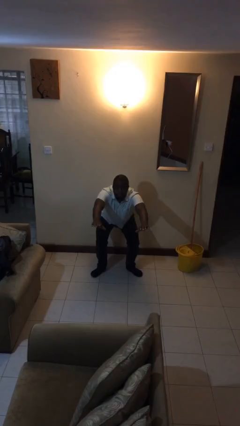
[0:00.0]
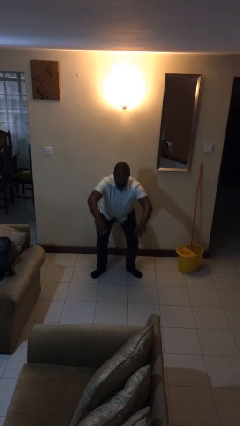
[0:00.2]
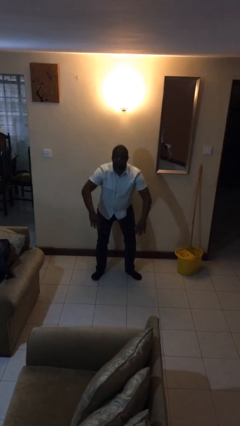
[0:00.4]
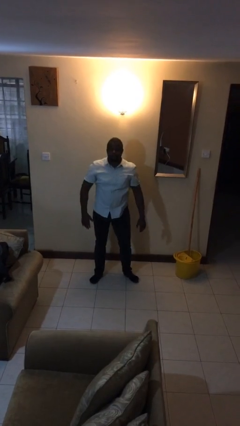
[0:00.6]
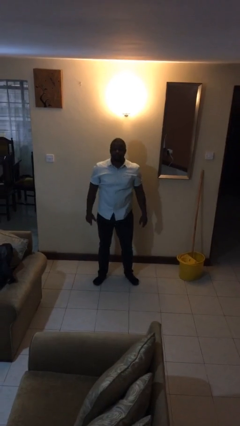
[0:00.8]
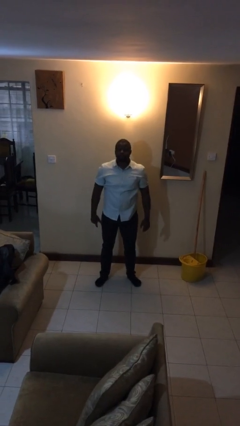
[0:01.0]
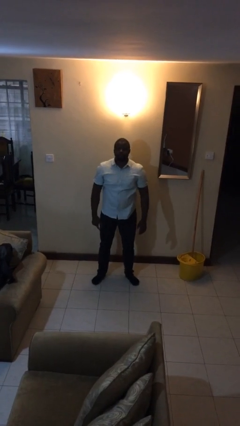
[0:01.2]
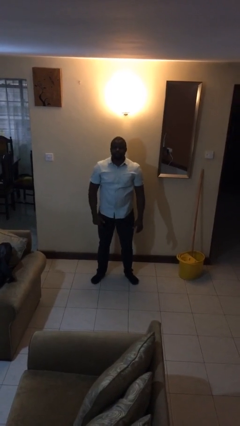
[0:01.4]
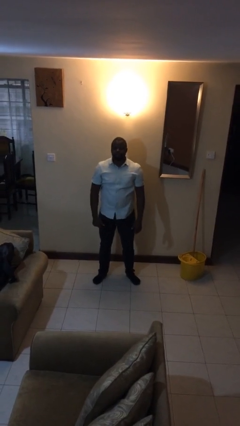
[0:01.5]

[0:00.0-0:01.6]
person stands up

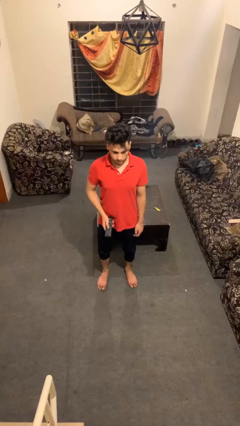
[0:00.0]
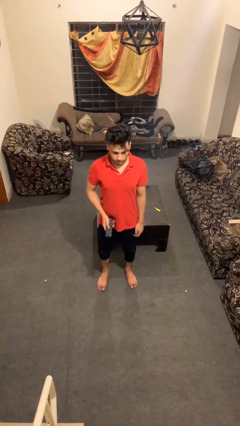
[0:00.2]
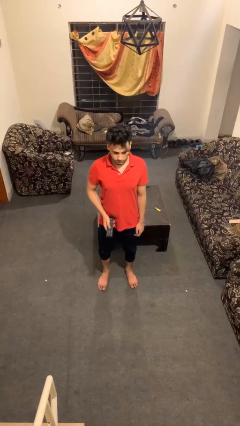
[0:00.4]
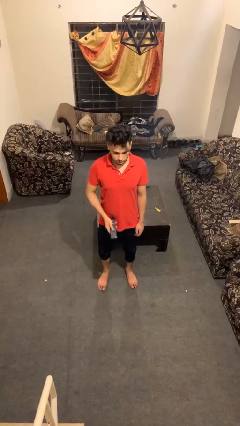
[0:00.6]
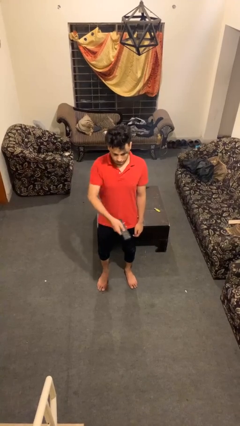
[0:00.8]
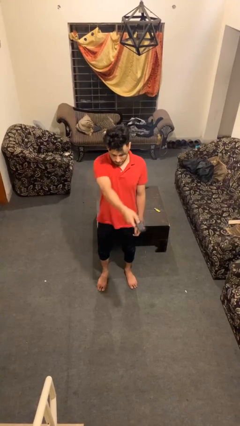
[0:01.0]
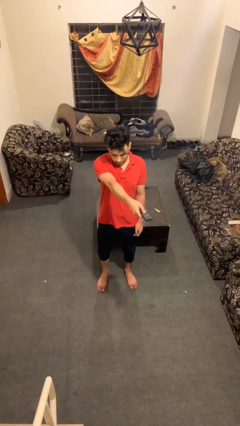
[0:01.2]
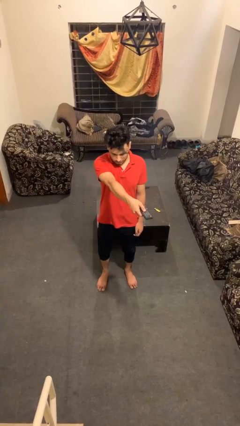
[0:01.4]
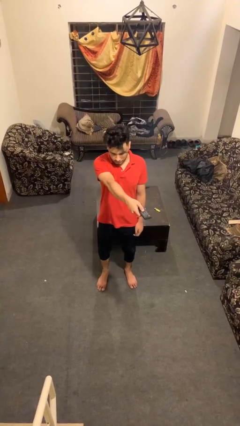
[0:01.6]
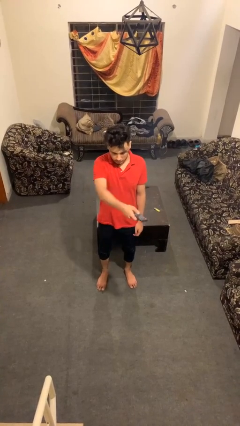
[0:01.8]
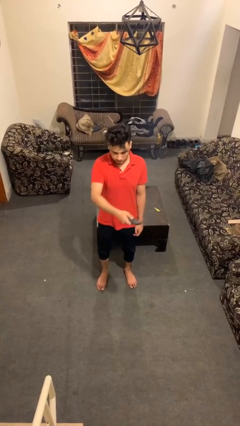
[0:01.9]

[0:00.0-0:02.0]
person uses television remote

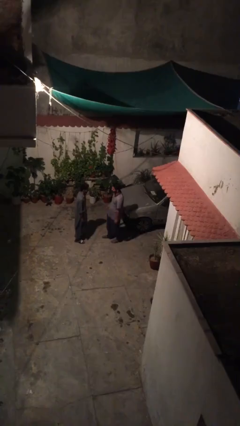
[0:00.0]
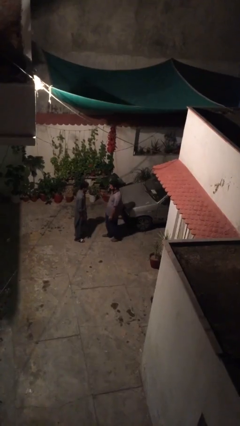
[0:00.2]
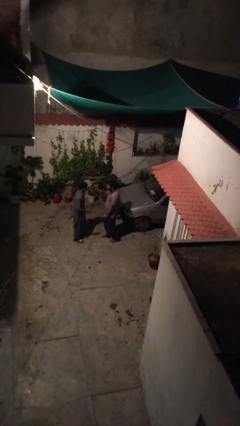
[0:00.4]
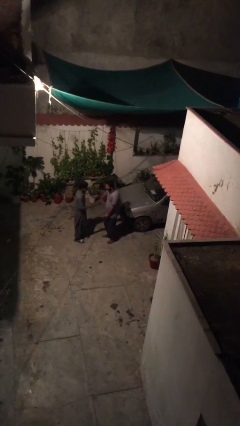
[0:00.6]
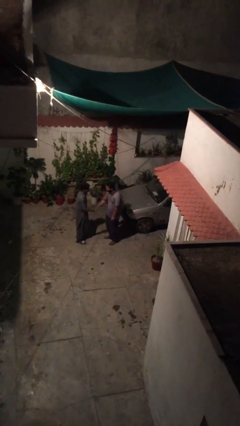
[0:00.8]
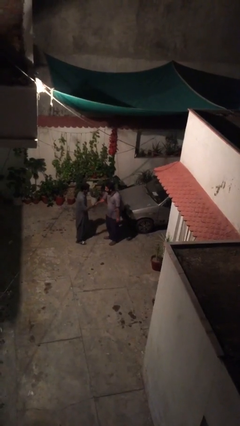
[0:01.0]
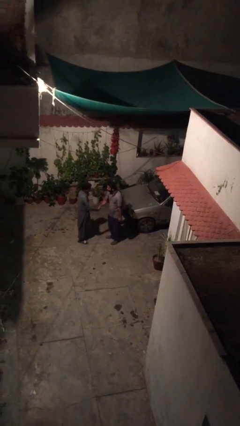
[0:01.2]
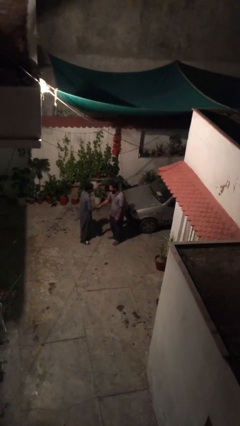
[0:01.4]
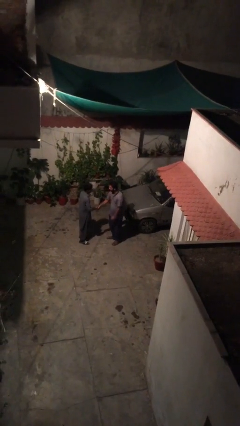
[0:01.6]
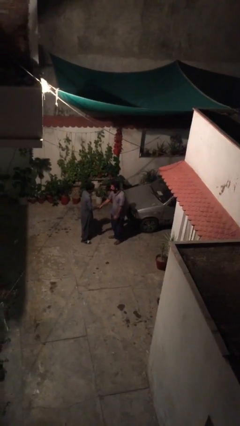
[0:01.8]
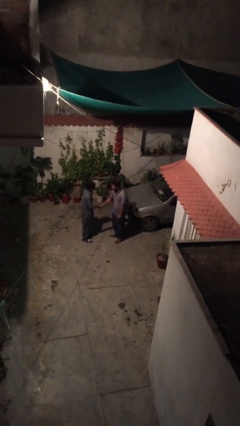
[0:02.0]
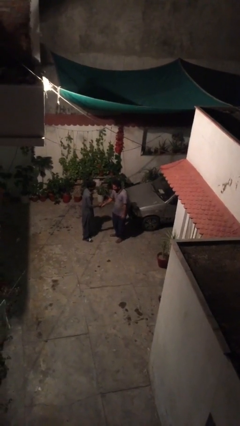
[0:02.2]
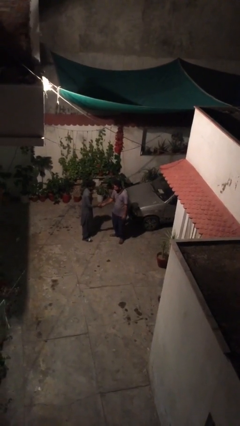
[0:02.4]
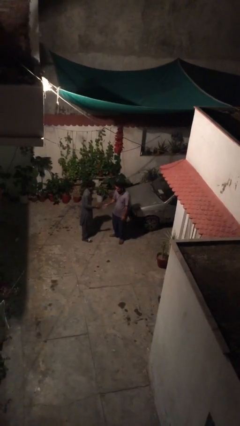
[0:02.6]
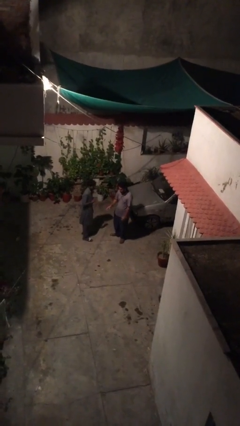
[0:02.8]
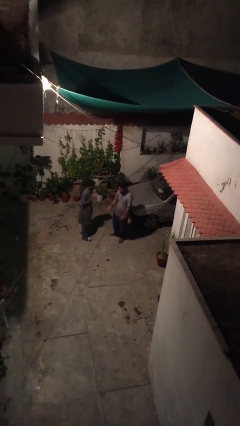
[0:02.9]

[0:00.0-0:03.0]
person shakes hand

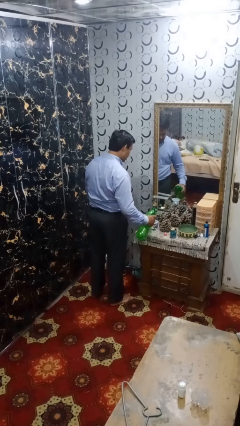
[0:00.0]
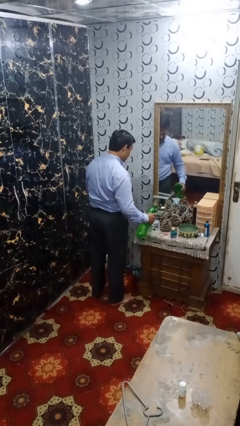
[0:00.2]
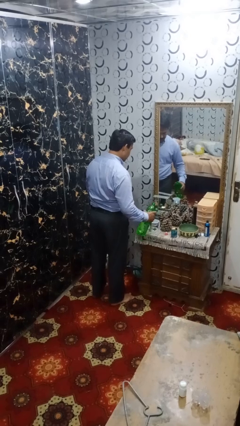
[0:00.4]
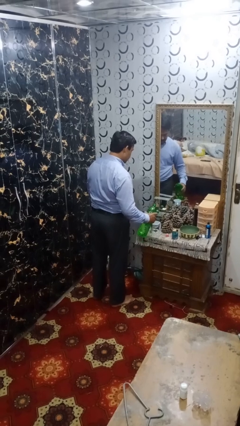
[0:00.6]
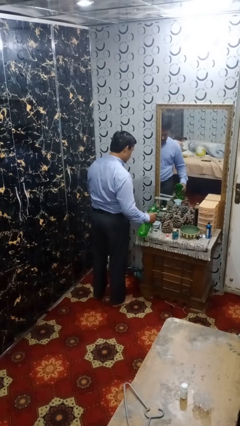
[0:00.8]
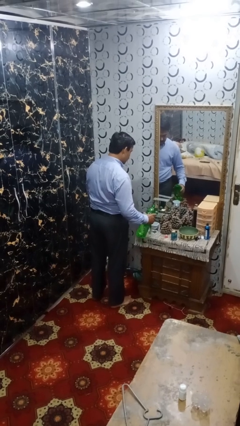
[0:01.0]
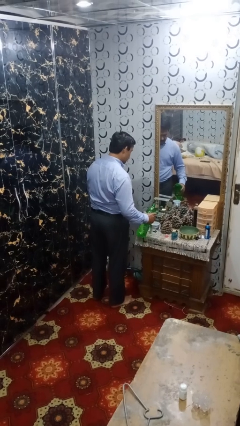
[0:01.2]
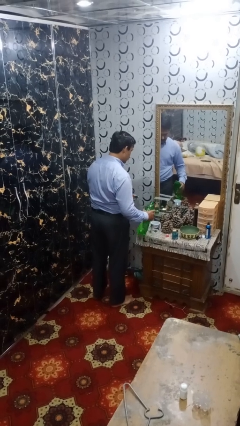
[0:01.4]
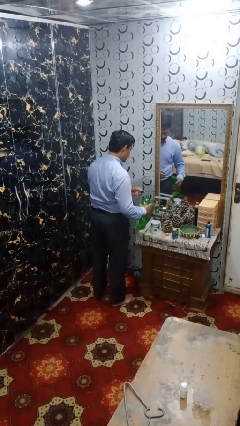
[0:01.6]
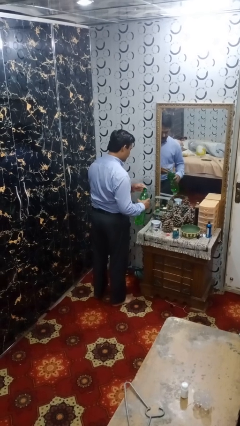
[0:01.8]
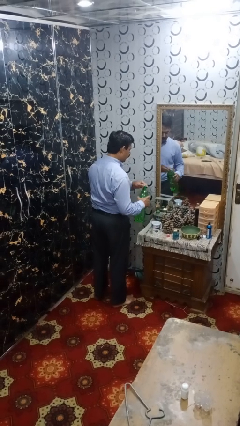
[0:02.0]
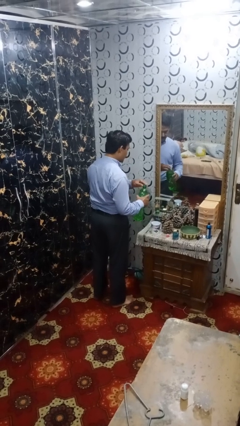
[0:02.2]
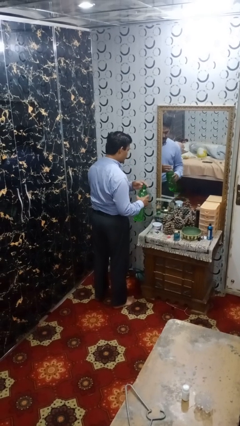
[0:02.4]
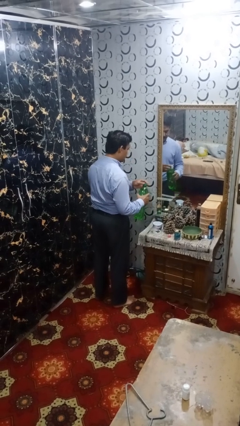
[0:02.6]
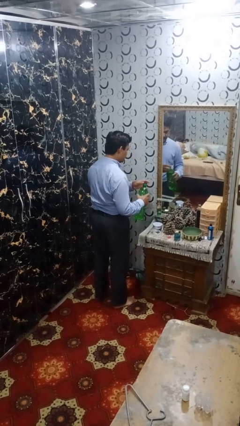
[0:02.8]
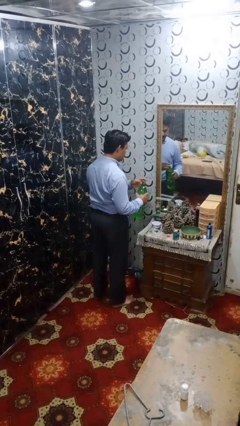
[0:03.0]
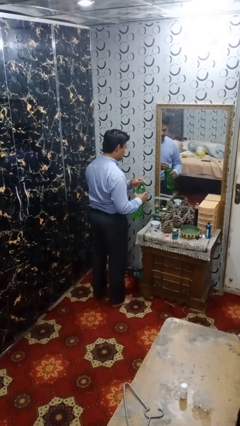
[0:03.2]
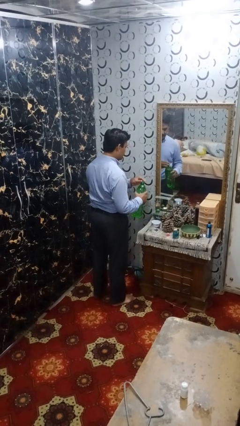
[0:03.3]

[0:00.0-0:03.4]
person screws lid to bottle

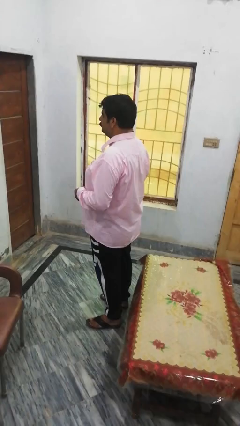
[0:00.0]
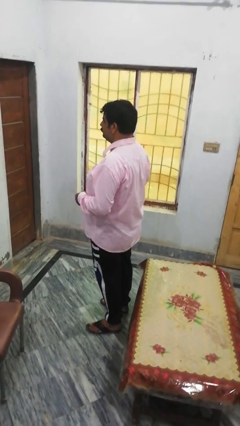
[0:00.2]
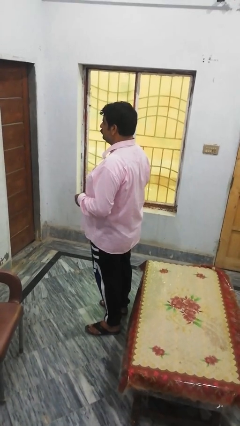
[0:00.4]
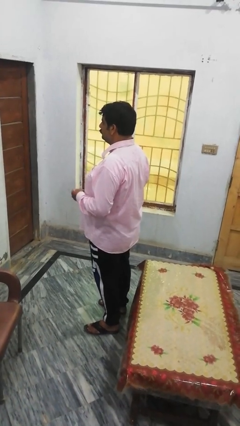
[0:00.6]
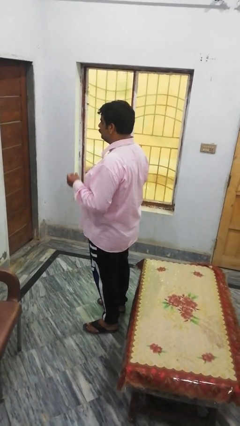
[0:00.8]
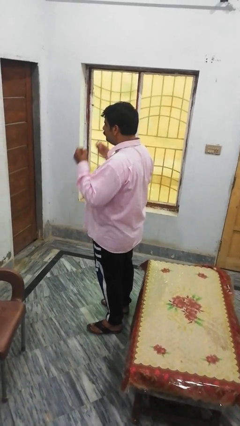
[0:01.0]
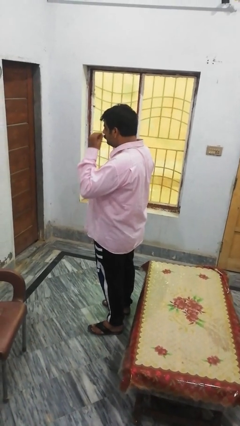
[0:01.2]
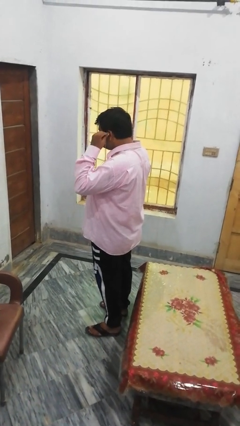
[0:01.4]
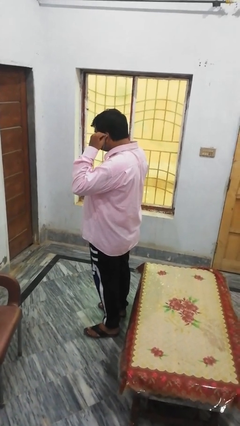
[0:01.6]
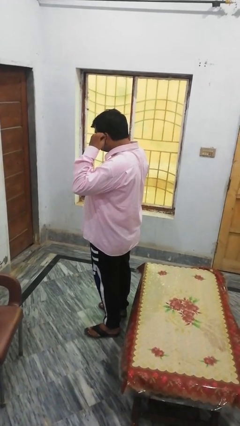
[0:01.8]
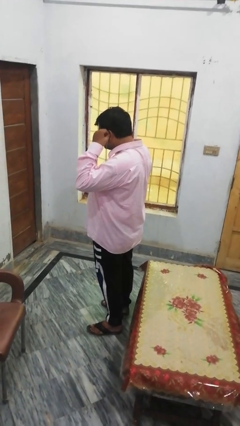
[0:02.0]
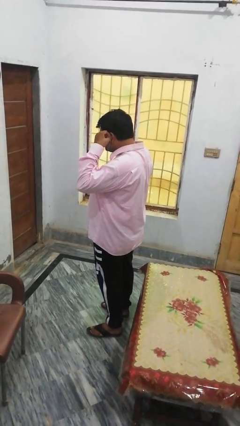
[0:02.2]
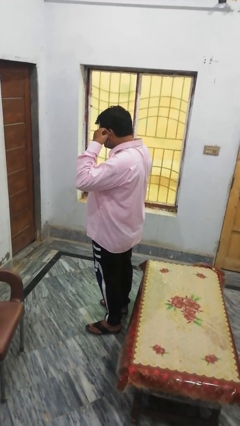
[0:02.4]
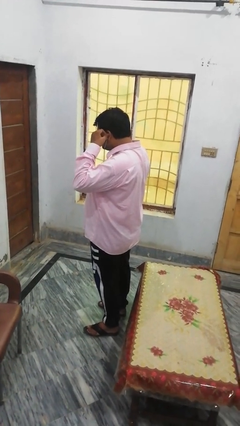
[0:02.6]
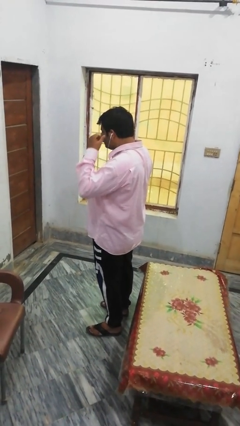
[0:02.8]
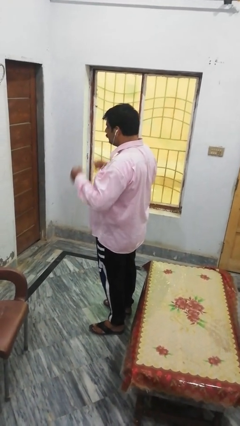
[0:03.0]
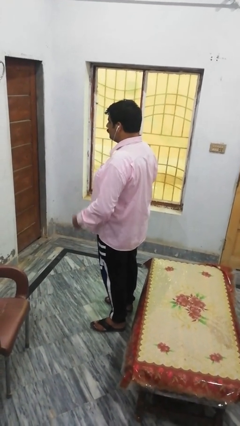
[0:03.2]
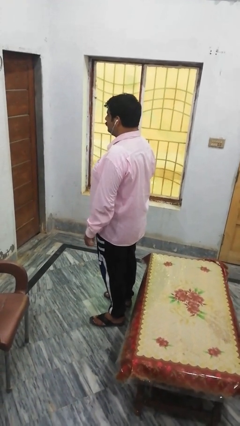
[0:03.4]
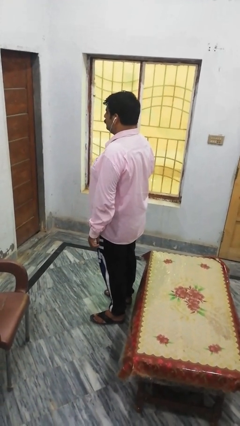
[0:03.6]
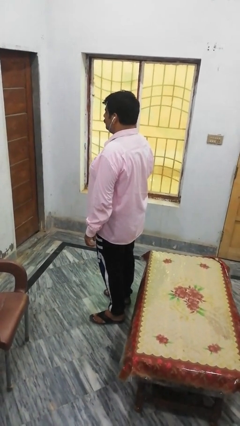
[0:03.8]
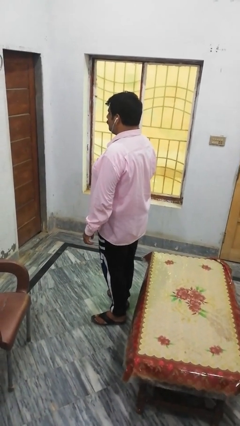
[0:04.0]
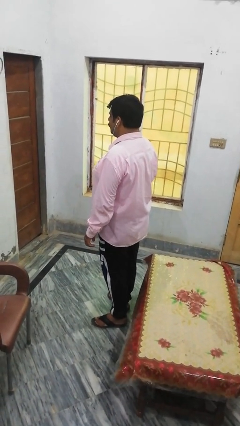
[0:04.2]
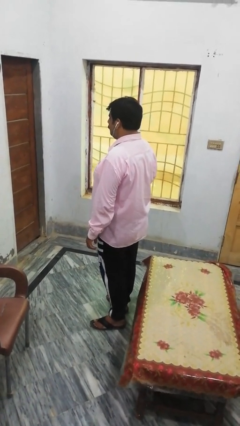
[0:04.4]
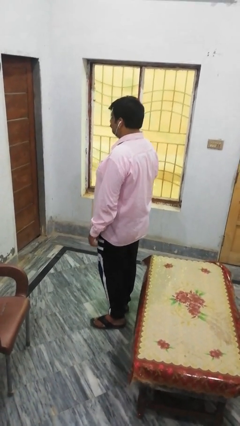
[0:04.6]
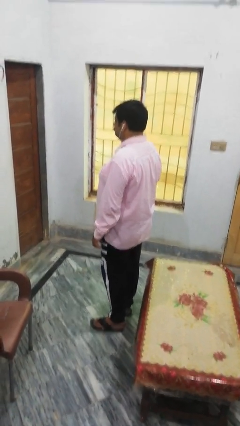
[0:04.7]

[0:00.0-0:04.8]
person puts on headphones

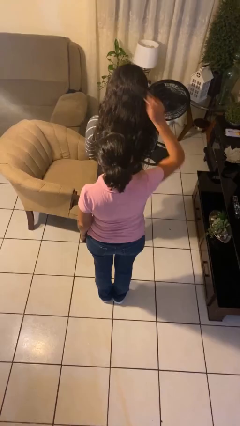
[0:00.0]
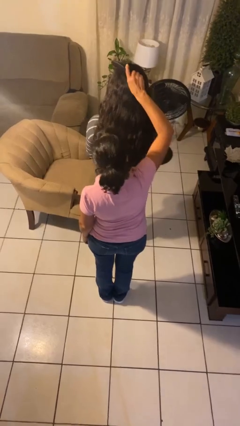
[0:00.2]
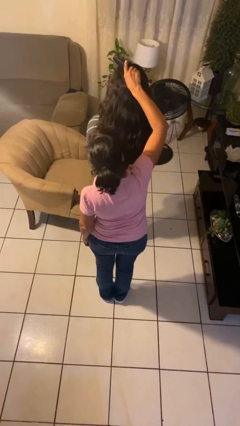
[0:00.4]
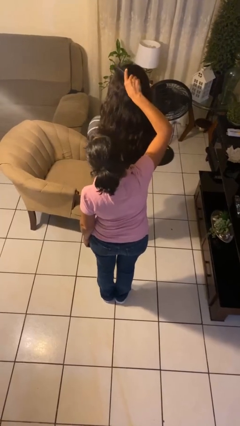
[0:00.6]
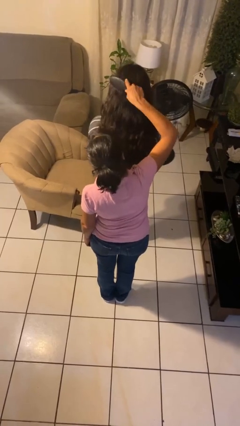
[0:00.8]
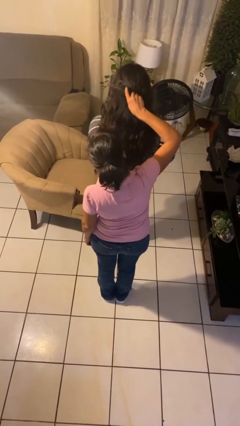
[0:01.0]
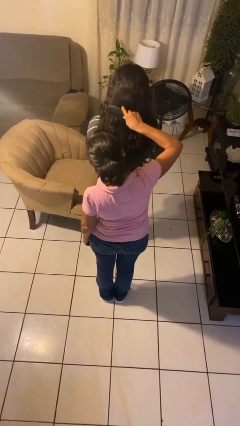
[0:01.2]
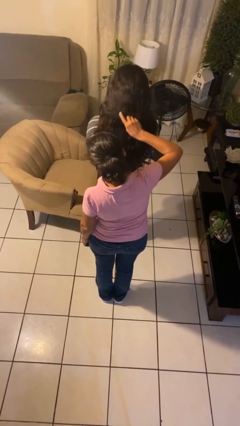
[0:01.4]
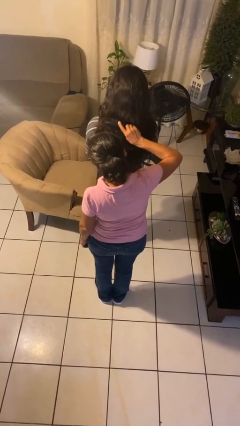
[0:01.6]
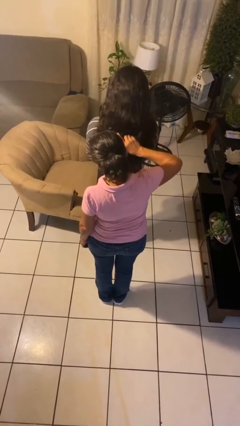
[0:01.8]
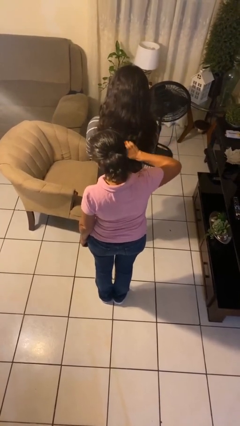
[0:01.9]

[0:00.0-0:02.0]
person brushes hair of person

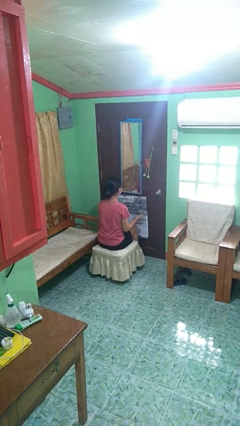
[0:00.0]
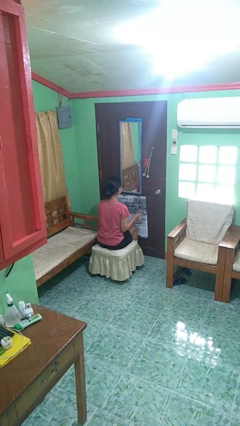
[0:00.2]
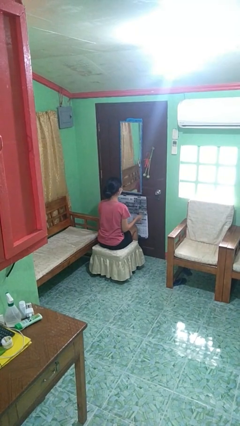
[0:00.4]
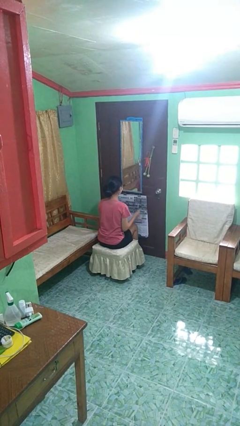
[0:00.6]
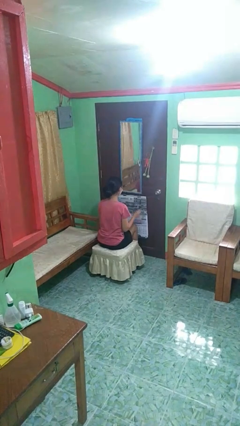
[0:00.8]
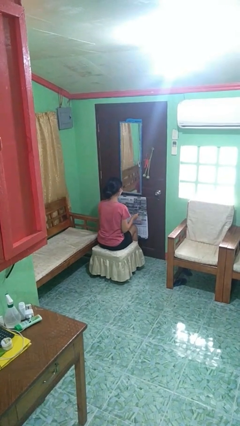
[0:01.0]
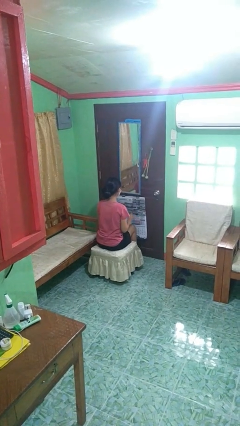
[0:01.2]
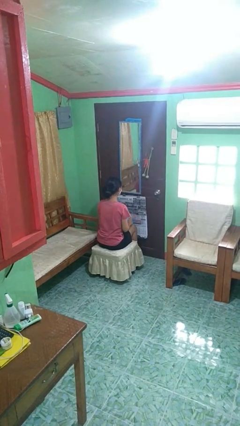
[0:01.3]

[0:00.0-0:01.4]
person snaps fingers
